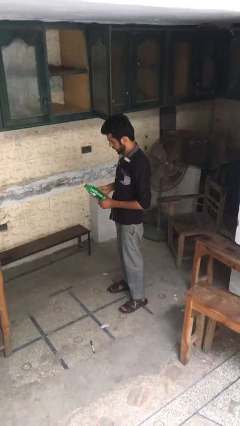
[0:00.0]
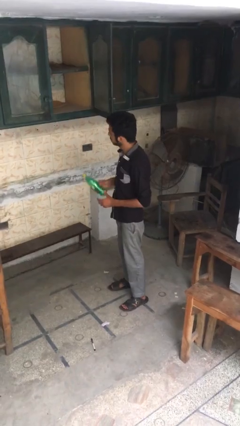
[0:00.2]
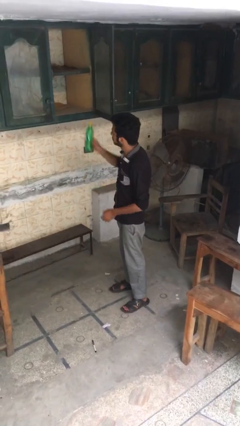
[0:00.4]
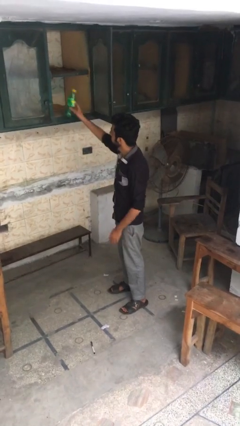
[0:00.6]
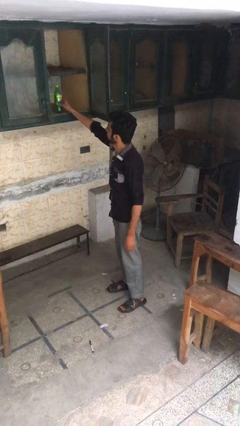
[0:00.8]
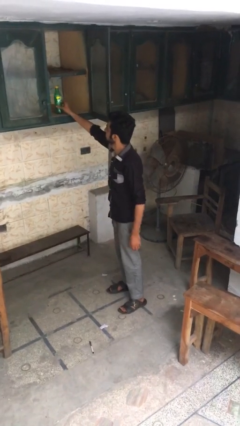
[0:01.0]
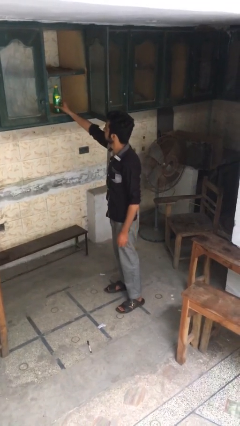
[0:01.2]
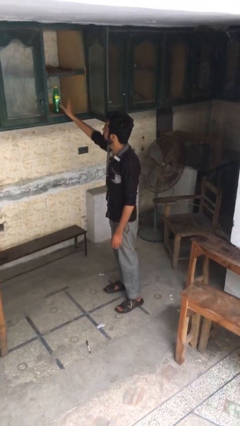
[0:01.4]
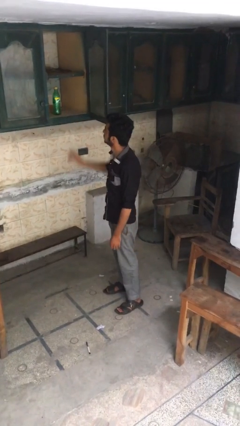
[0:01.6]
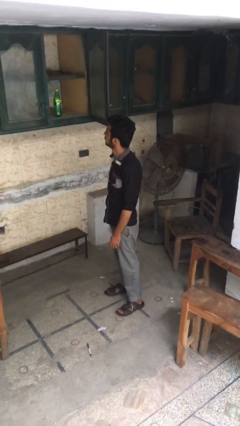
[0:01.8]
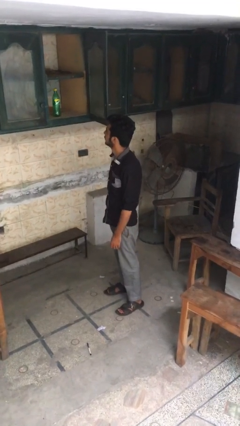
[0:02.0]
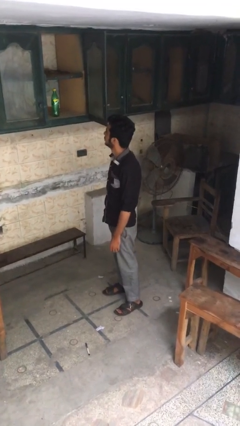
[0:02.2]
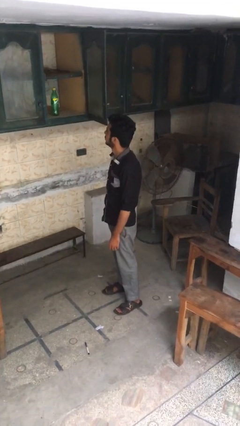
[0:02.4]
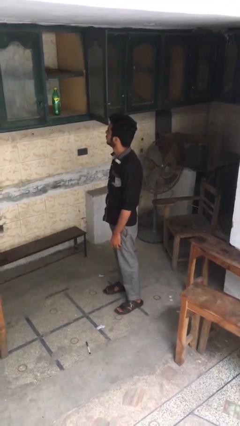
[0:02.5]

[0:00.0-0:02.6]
person puts object in cabinet

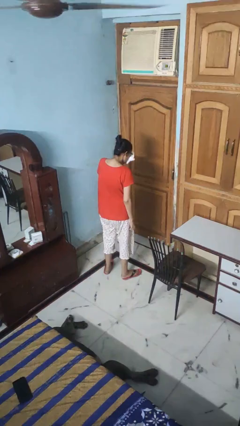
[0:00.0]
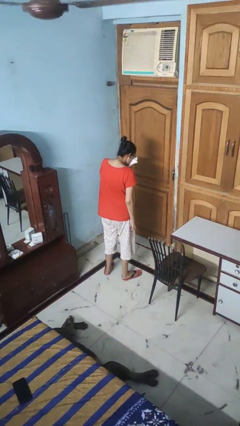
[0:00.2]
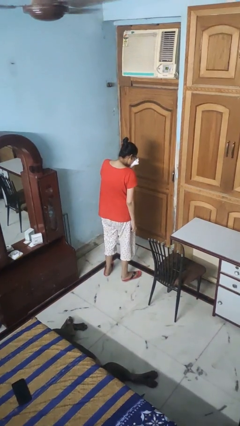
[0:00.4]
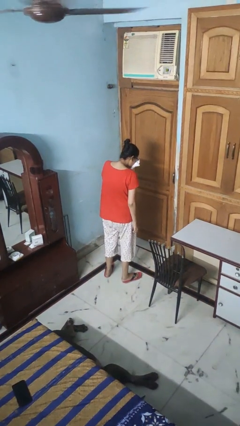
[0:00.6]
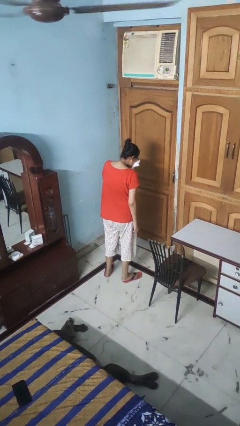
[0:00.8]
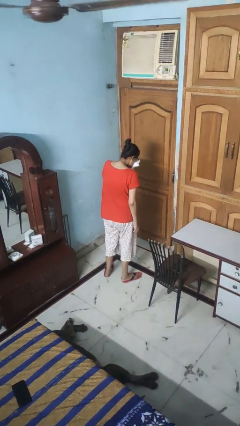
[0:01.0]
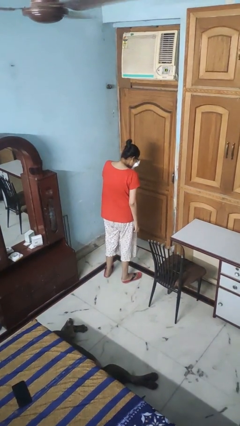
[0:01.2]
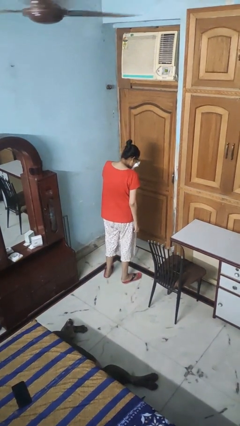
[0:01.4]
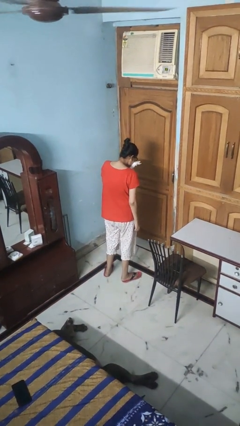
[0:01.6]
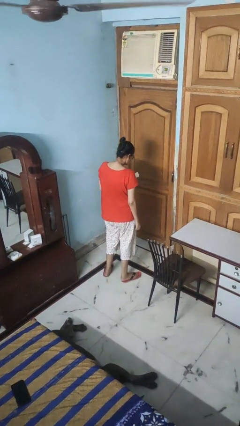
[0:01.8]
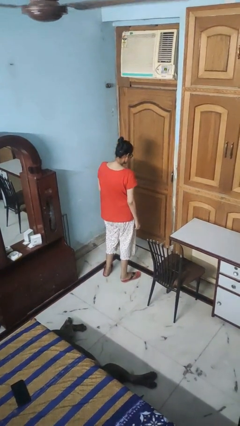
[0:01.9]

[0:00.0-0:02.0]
person blows nose

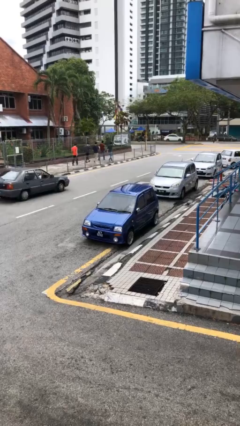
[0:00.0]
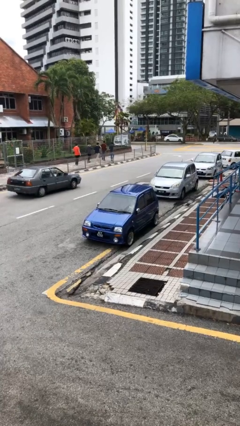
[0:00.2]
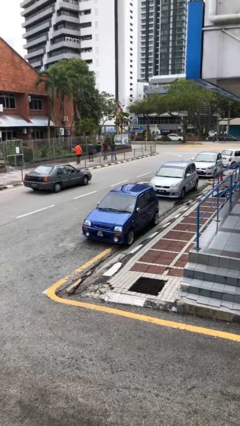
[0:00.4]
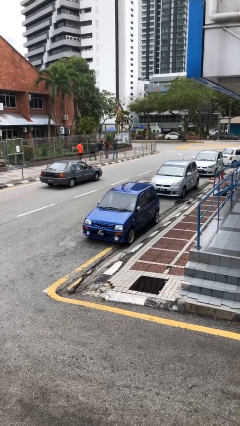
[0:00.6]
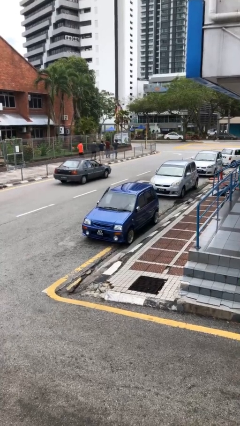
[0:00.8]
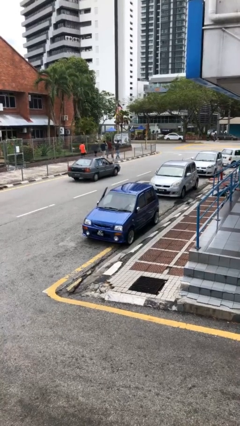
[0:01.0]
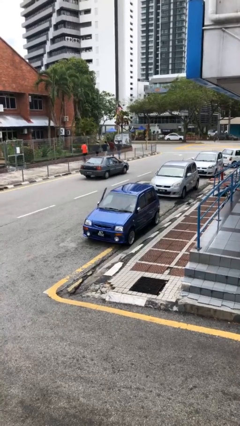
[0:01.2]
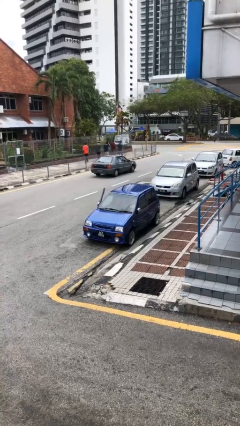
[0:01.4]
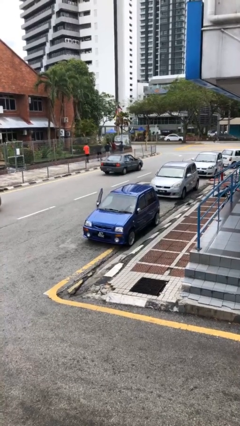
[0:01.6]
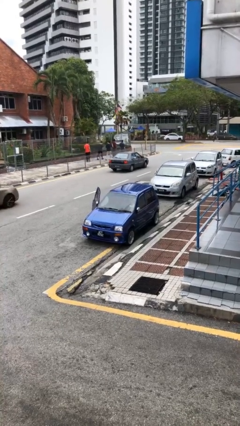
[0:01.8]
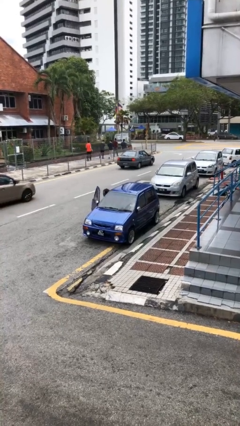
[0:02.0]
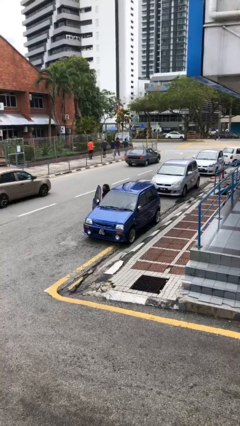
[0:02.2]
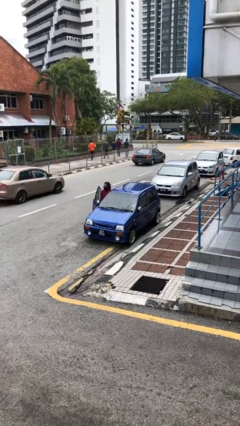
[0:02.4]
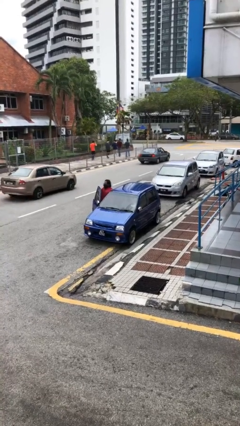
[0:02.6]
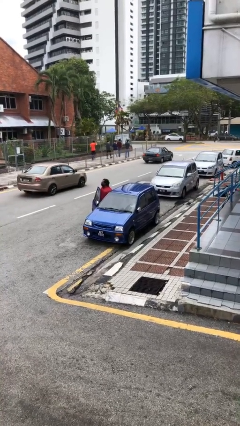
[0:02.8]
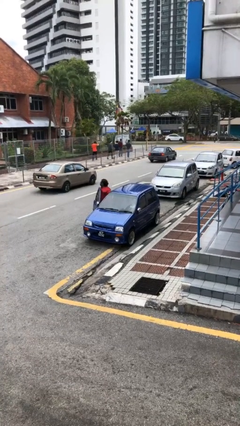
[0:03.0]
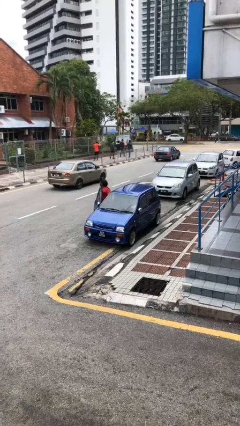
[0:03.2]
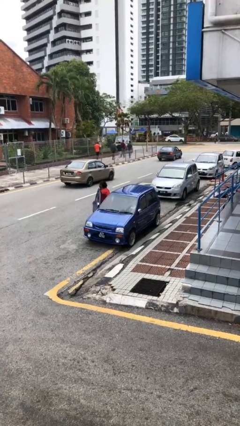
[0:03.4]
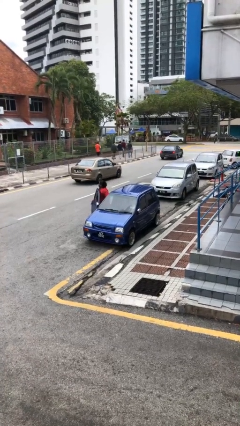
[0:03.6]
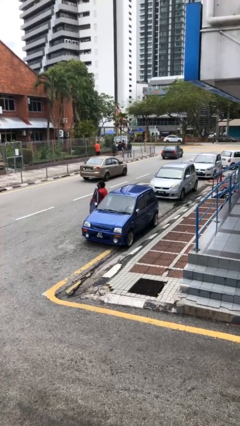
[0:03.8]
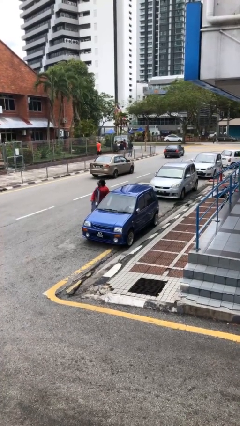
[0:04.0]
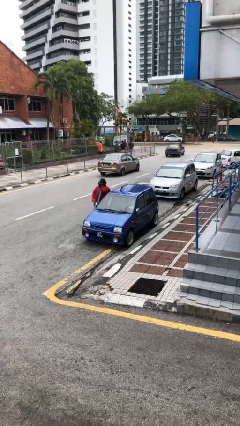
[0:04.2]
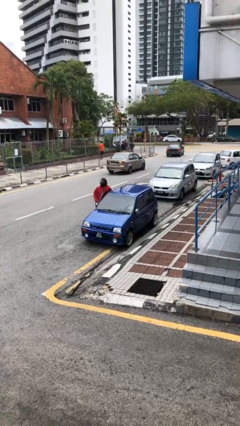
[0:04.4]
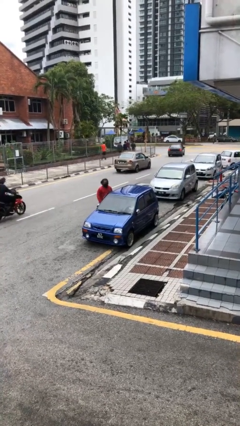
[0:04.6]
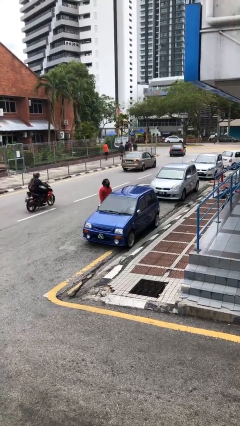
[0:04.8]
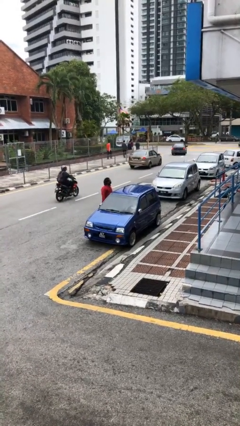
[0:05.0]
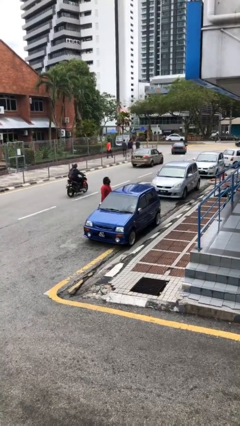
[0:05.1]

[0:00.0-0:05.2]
car drops off person

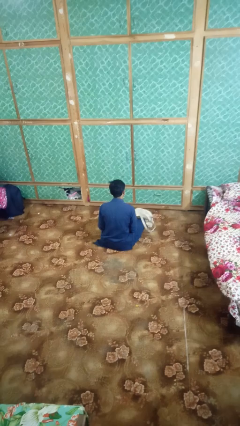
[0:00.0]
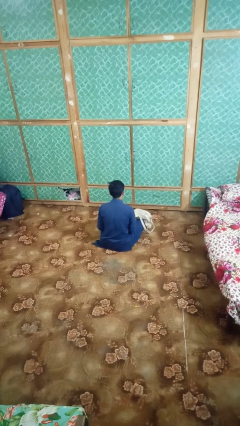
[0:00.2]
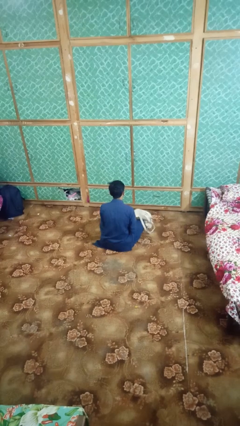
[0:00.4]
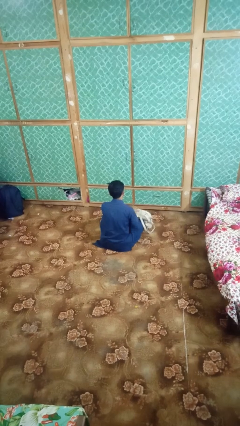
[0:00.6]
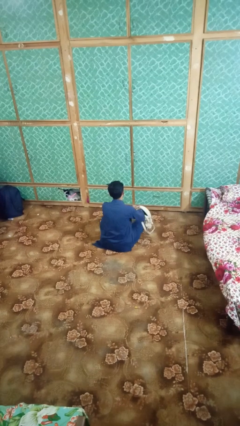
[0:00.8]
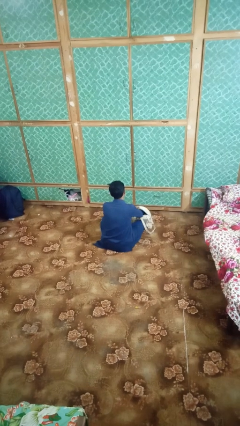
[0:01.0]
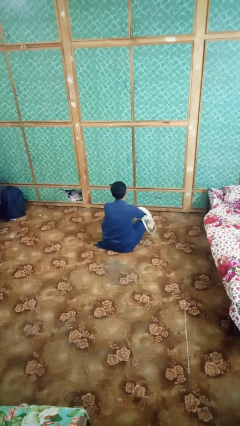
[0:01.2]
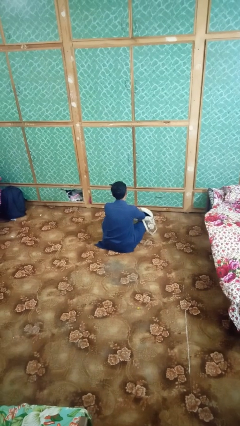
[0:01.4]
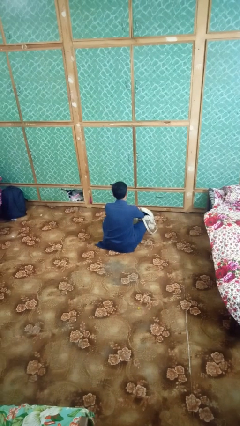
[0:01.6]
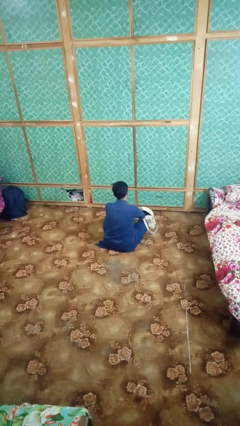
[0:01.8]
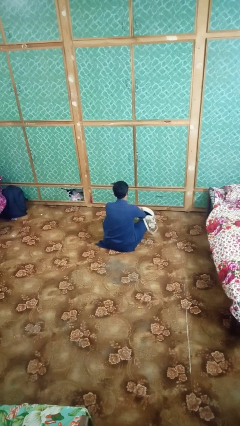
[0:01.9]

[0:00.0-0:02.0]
person searches in bag

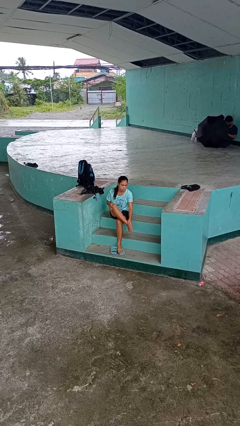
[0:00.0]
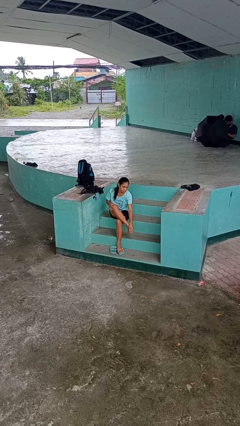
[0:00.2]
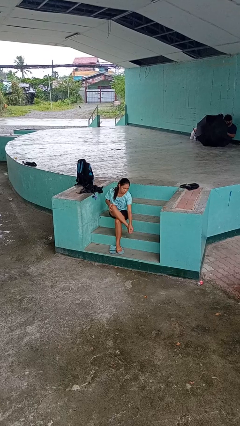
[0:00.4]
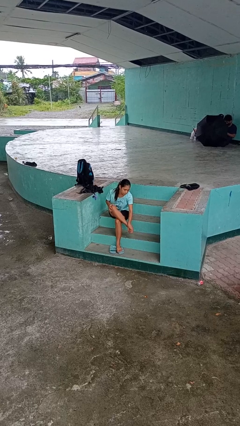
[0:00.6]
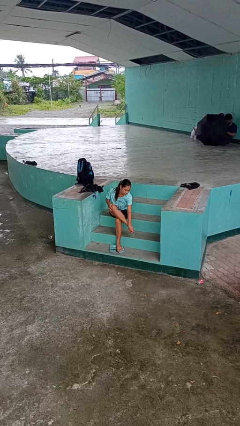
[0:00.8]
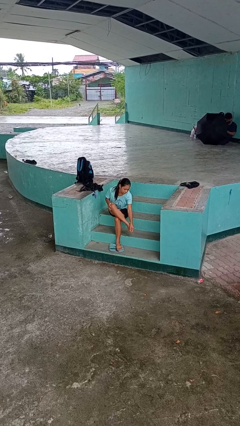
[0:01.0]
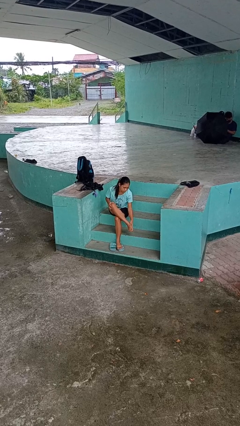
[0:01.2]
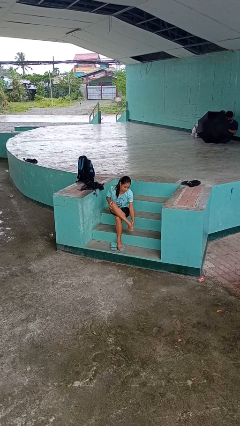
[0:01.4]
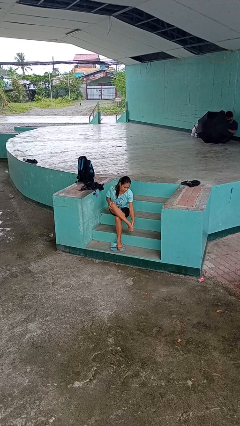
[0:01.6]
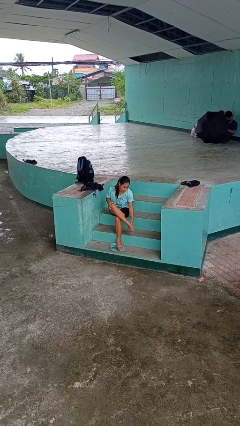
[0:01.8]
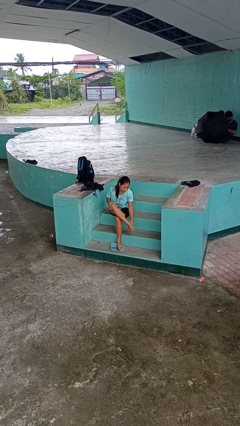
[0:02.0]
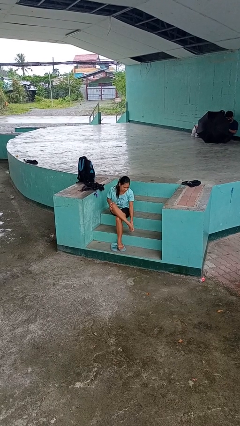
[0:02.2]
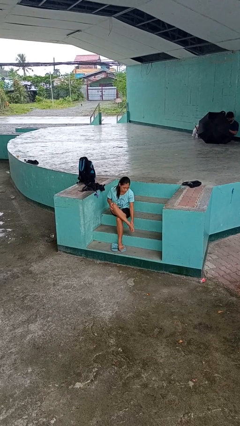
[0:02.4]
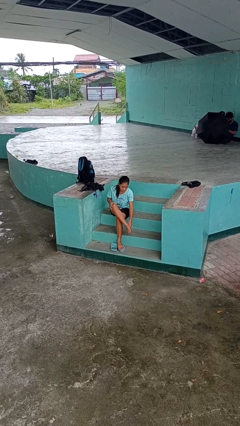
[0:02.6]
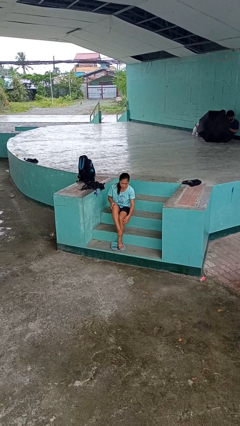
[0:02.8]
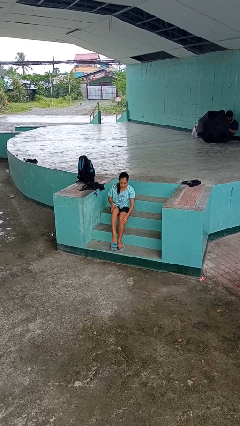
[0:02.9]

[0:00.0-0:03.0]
person rubs foot

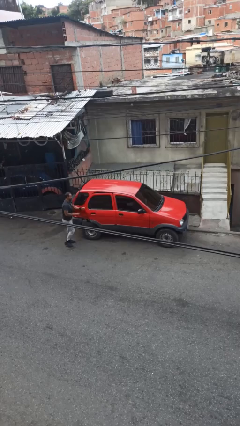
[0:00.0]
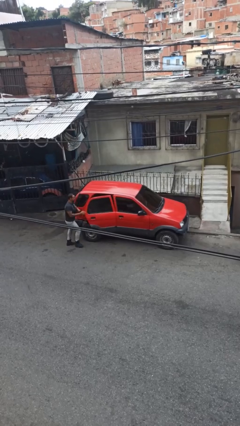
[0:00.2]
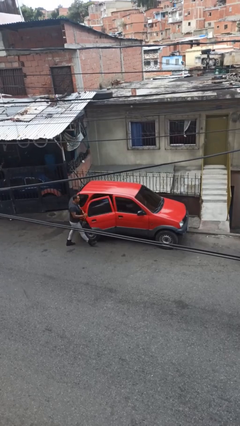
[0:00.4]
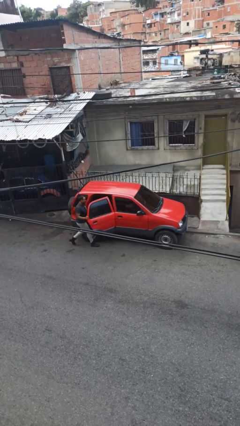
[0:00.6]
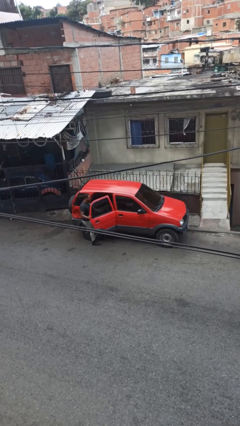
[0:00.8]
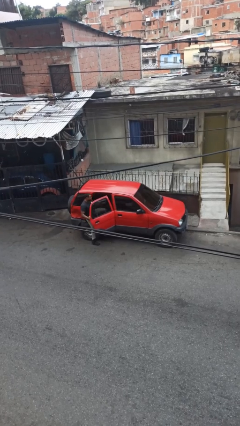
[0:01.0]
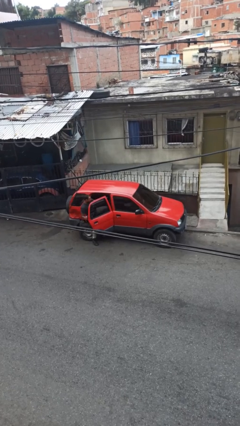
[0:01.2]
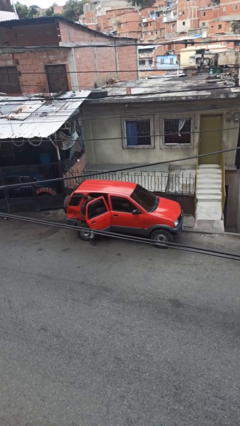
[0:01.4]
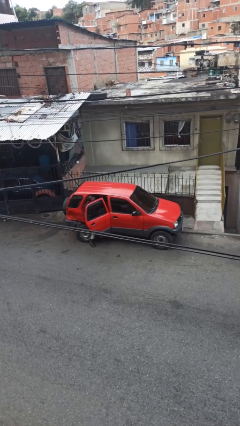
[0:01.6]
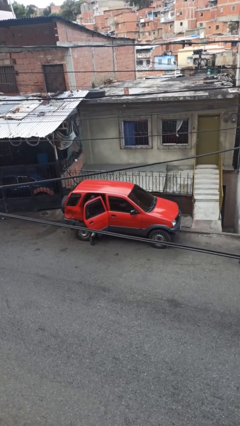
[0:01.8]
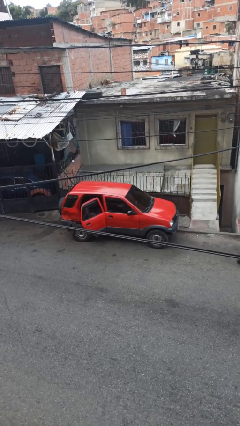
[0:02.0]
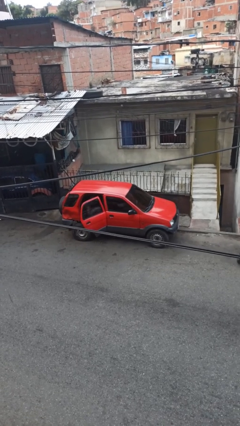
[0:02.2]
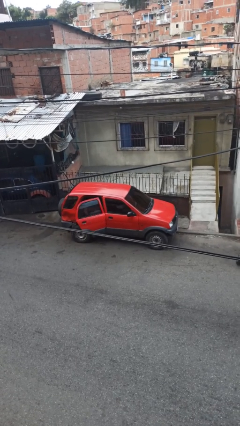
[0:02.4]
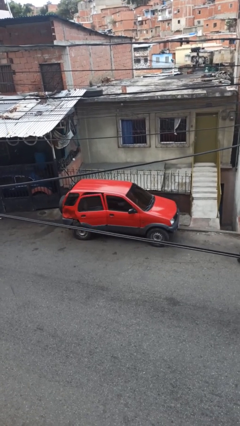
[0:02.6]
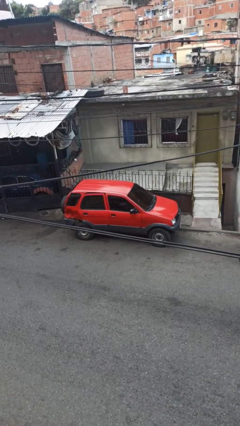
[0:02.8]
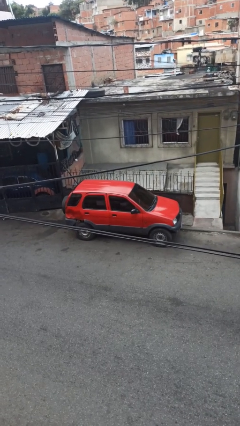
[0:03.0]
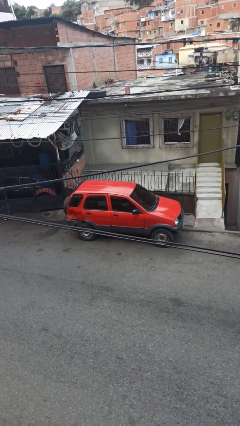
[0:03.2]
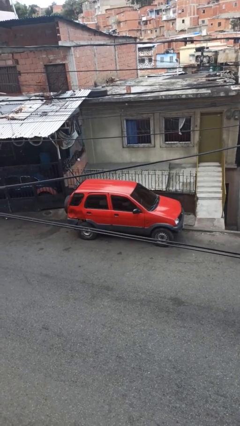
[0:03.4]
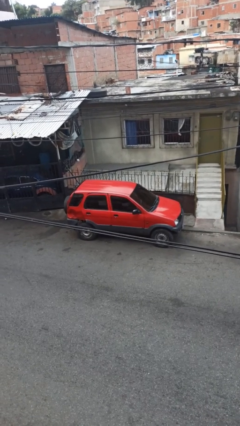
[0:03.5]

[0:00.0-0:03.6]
car picks up person
